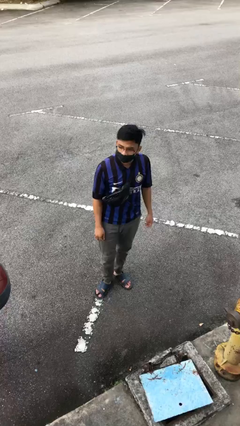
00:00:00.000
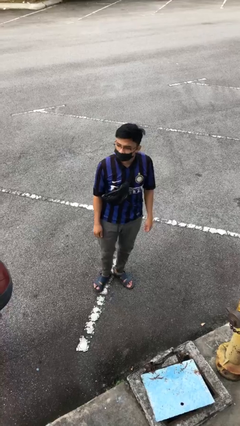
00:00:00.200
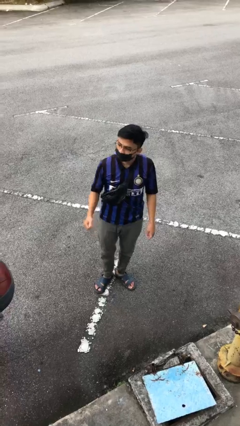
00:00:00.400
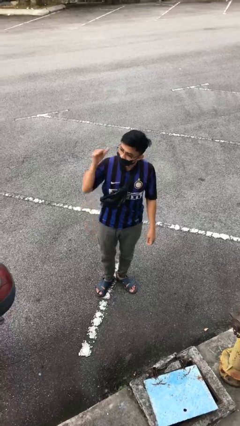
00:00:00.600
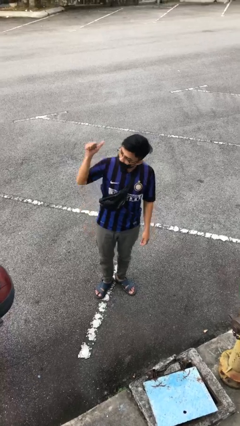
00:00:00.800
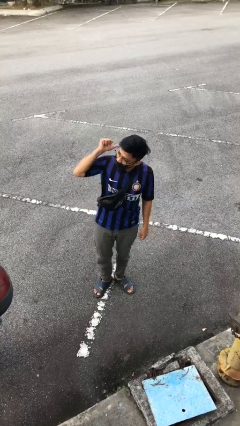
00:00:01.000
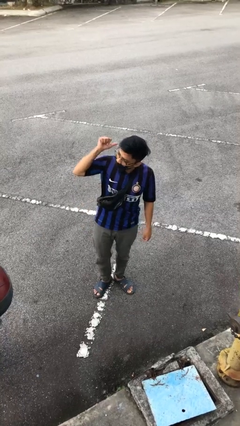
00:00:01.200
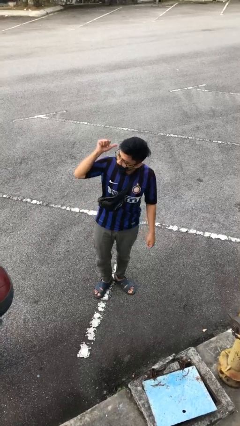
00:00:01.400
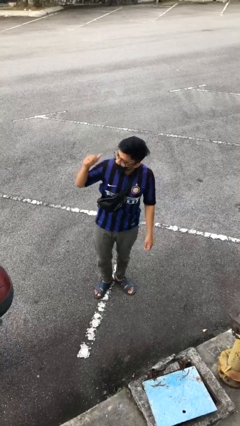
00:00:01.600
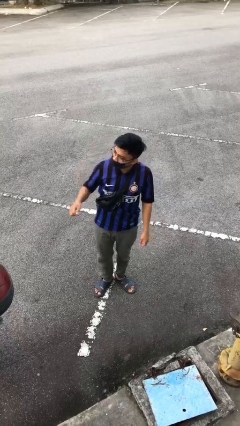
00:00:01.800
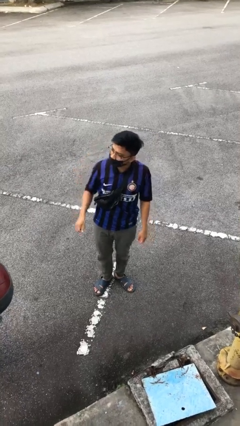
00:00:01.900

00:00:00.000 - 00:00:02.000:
person gestures behind me

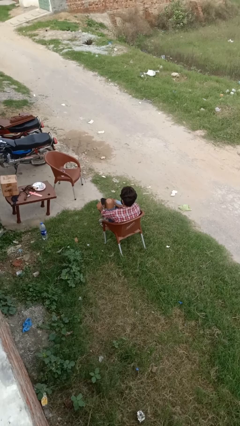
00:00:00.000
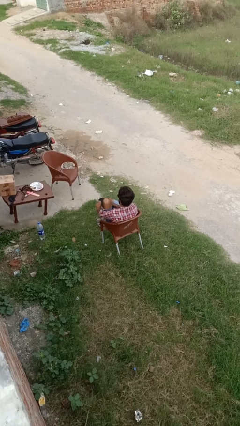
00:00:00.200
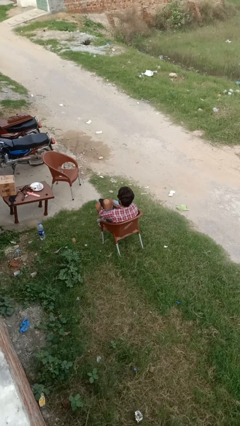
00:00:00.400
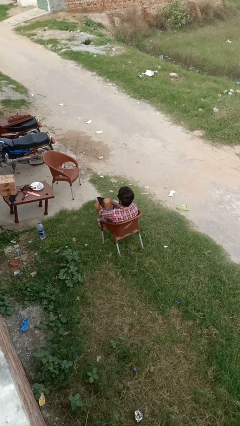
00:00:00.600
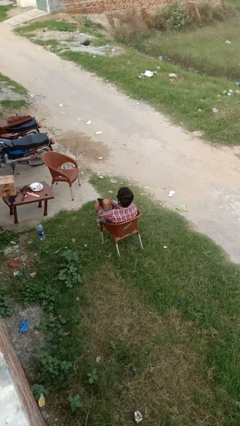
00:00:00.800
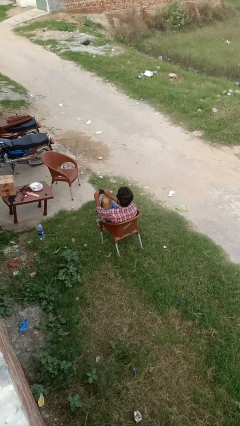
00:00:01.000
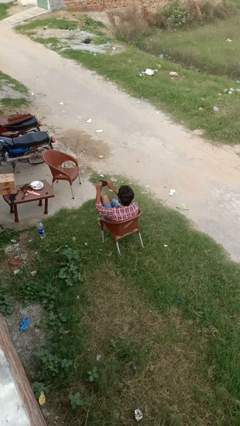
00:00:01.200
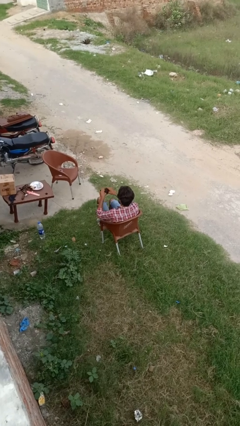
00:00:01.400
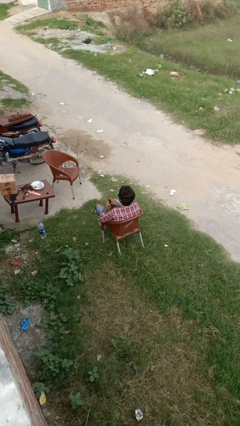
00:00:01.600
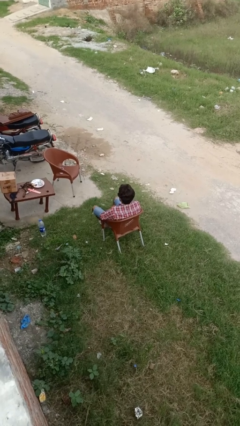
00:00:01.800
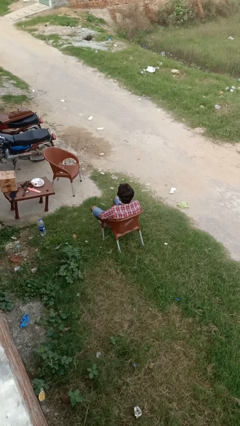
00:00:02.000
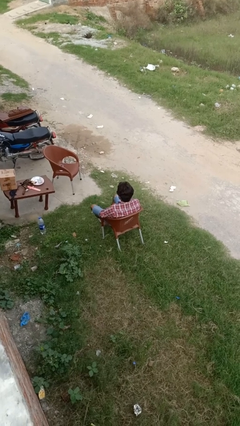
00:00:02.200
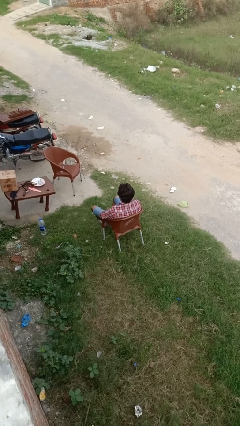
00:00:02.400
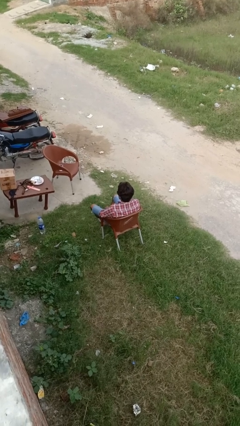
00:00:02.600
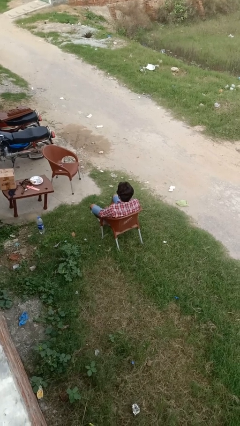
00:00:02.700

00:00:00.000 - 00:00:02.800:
person takes off socks

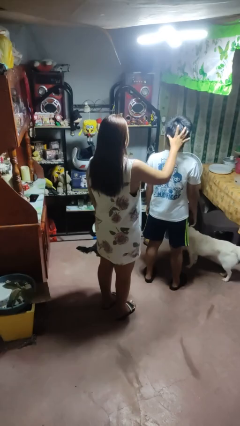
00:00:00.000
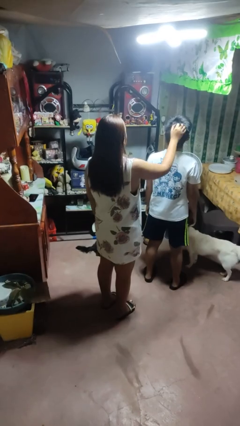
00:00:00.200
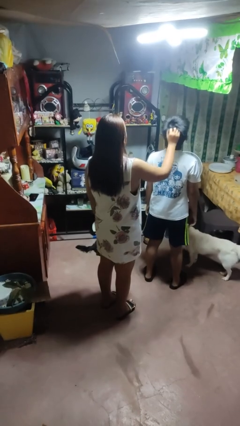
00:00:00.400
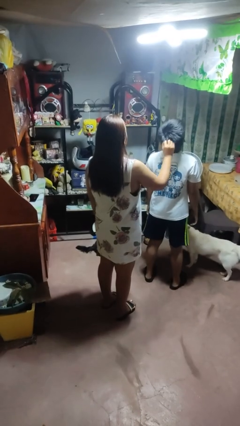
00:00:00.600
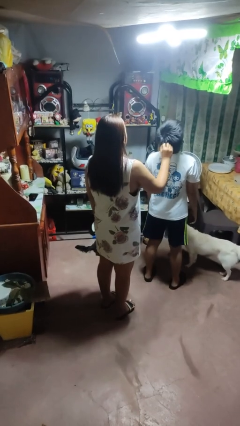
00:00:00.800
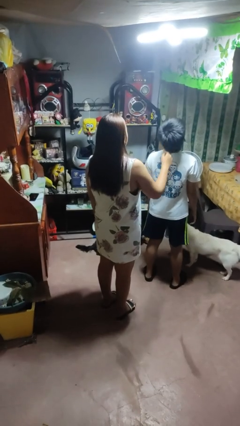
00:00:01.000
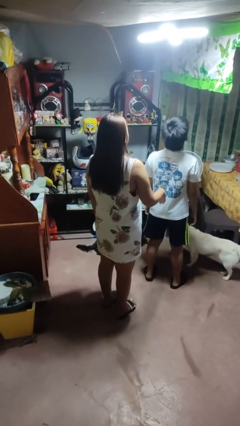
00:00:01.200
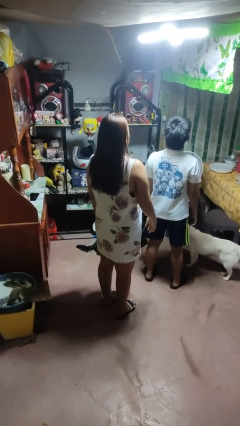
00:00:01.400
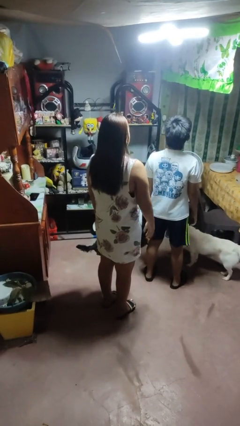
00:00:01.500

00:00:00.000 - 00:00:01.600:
person grabs person by hair

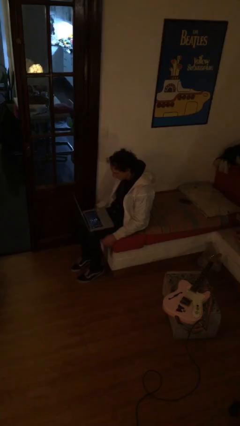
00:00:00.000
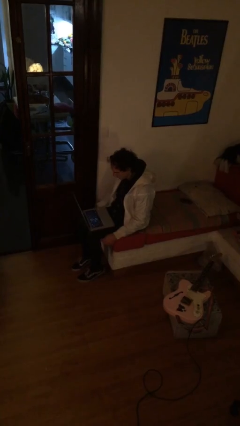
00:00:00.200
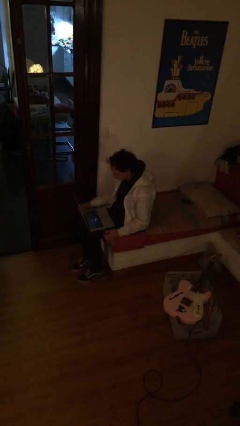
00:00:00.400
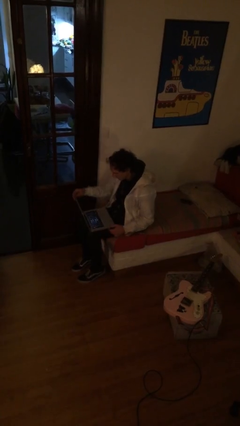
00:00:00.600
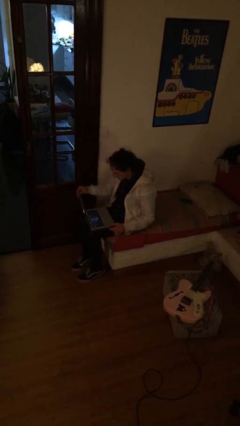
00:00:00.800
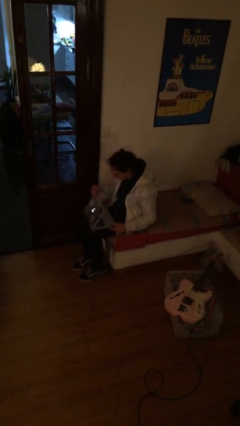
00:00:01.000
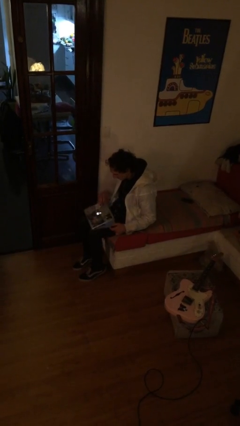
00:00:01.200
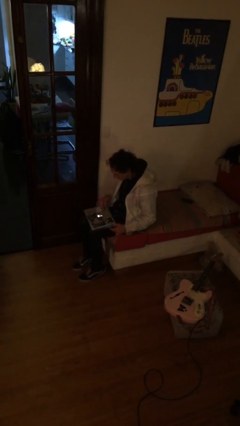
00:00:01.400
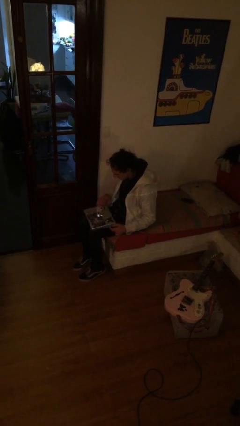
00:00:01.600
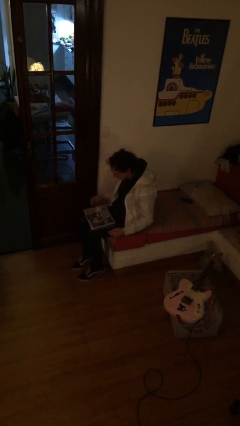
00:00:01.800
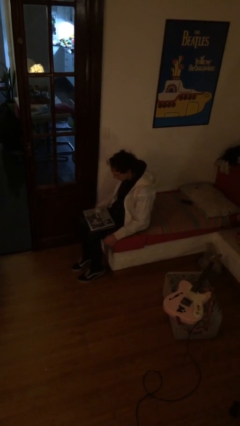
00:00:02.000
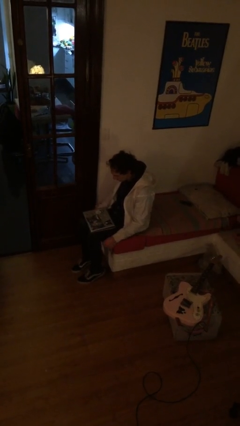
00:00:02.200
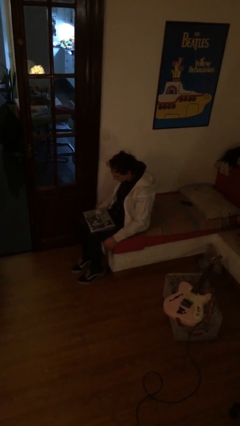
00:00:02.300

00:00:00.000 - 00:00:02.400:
person closes laptop

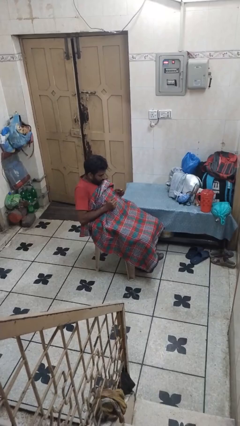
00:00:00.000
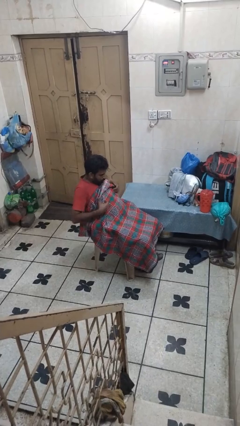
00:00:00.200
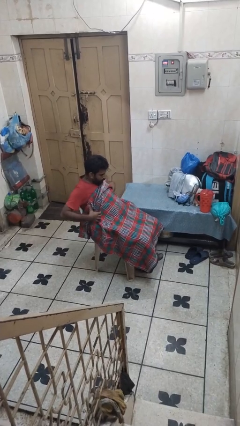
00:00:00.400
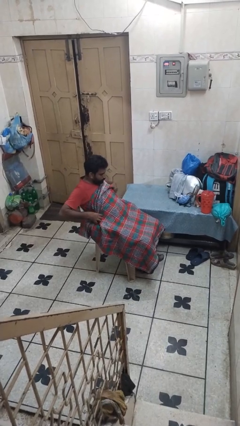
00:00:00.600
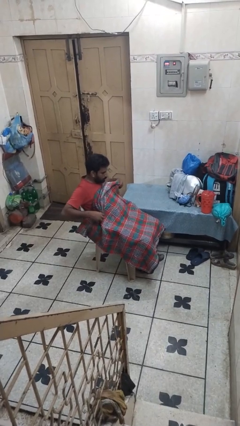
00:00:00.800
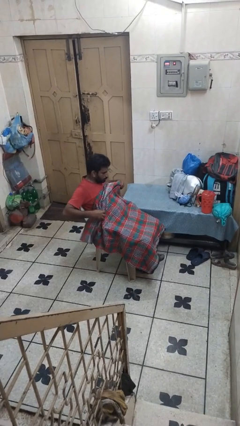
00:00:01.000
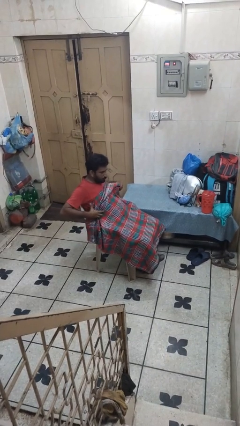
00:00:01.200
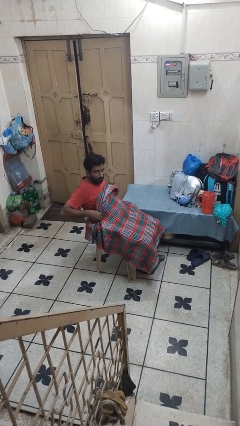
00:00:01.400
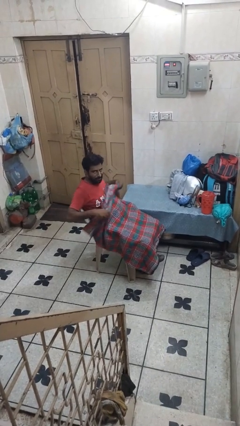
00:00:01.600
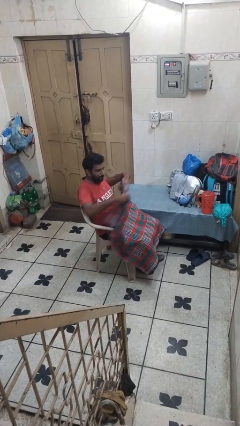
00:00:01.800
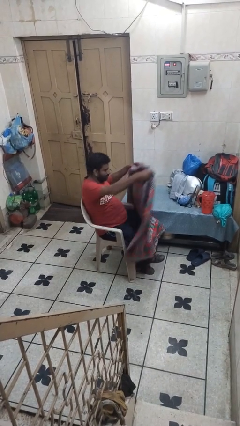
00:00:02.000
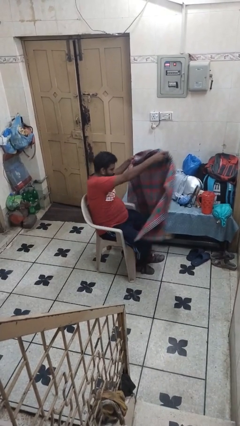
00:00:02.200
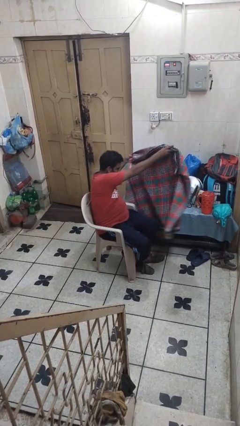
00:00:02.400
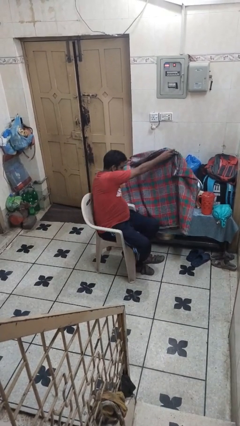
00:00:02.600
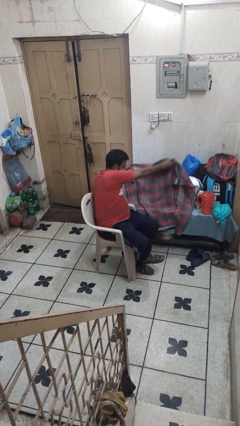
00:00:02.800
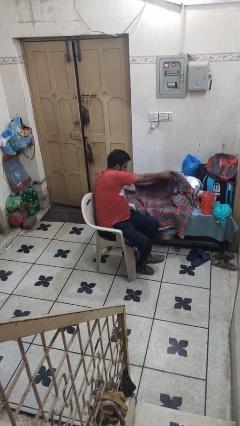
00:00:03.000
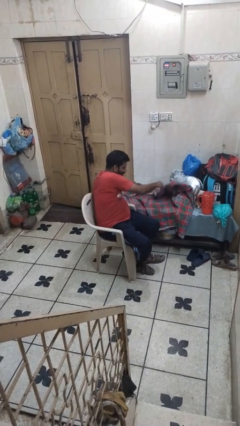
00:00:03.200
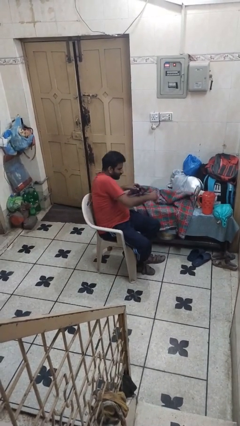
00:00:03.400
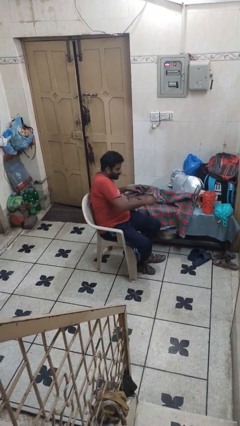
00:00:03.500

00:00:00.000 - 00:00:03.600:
person uncovers with blanket

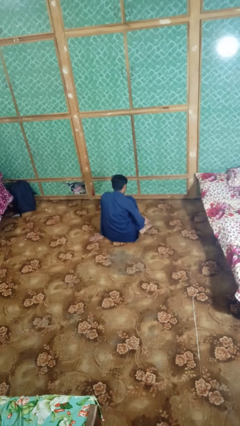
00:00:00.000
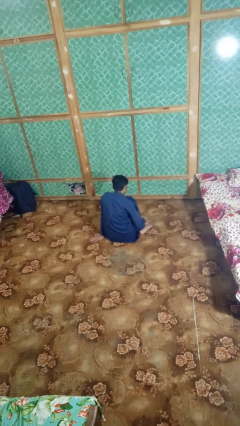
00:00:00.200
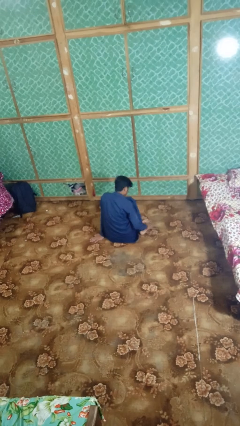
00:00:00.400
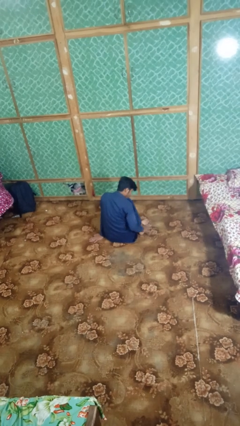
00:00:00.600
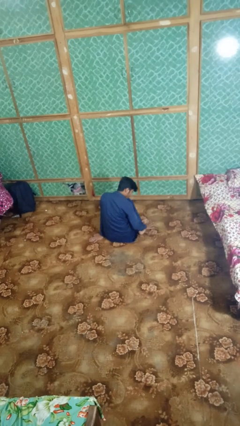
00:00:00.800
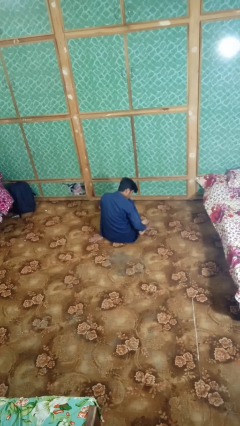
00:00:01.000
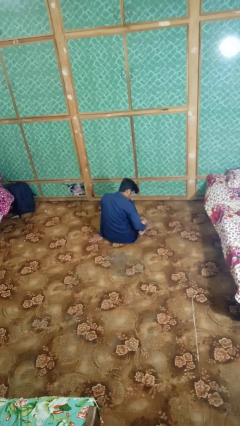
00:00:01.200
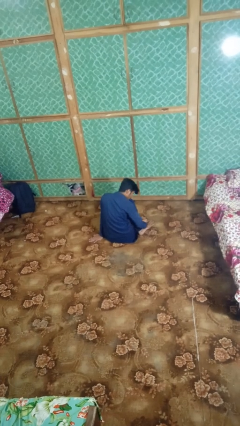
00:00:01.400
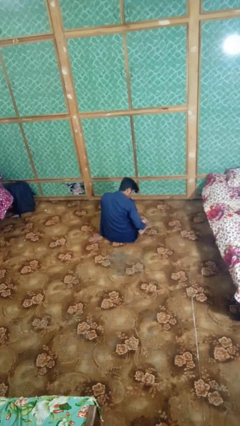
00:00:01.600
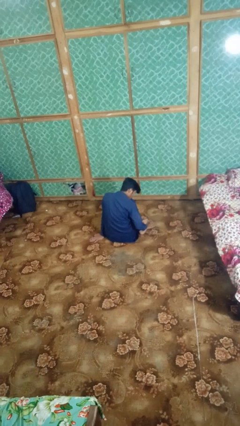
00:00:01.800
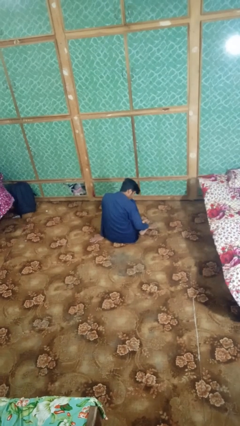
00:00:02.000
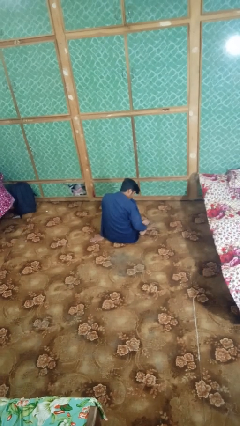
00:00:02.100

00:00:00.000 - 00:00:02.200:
person rubs foot

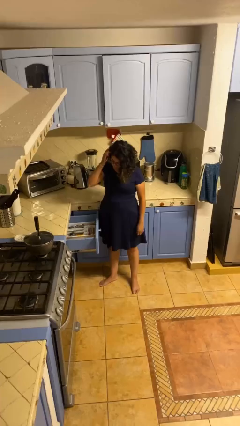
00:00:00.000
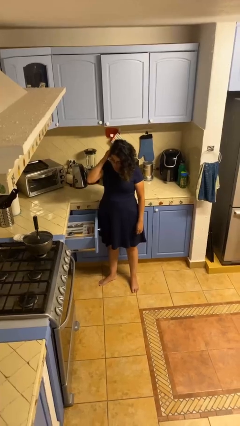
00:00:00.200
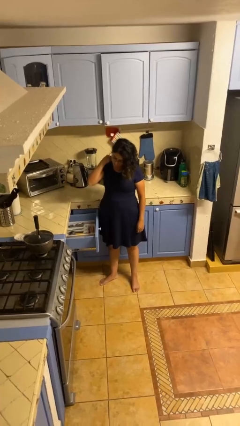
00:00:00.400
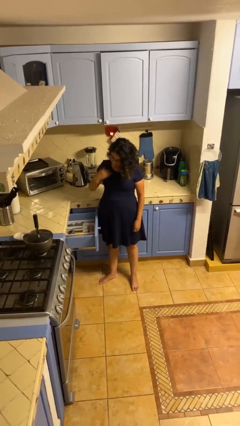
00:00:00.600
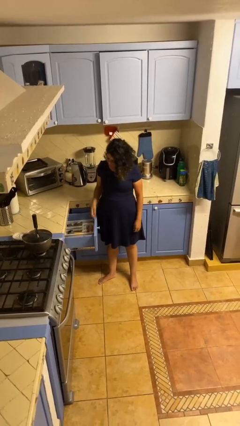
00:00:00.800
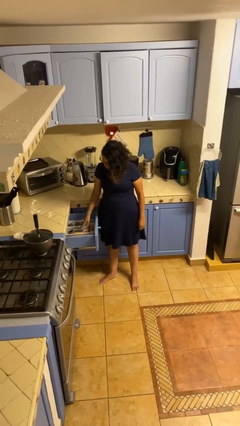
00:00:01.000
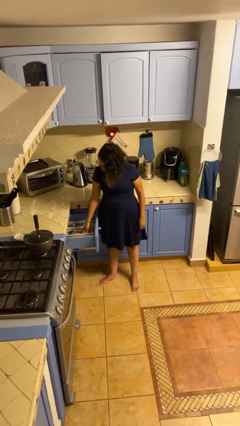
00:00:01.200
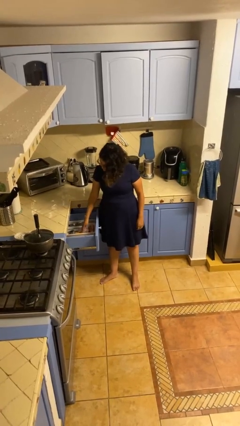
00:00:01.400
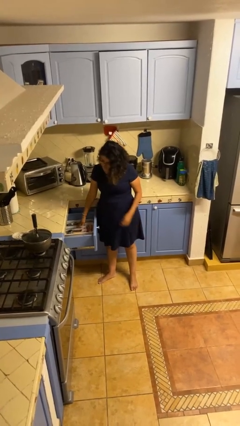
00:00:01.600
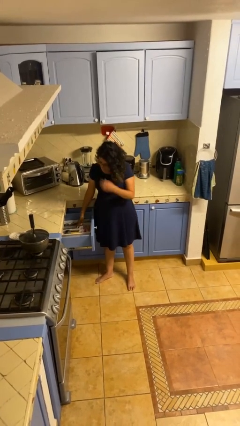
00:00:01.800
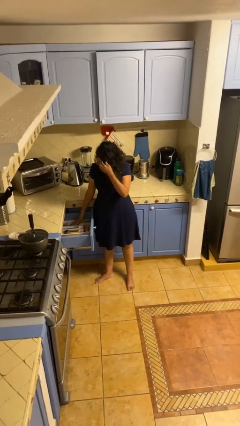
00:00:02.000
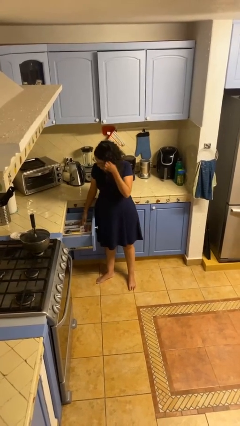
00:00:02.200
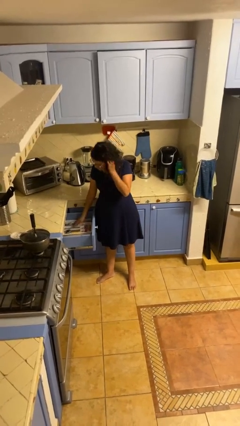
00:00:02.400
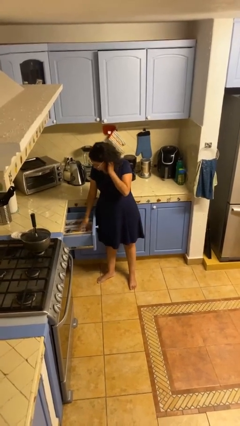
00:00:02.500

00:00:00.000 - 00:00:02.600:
person searches in kitchen drawer
